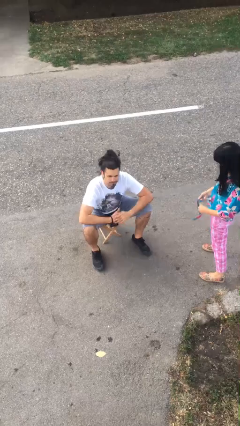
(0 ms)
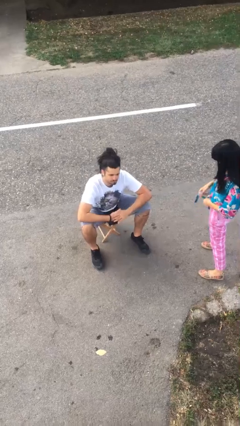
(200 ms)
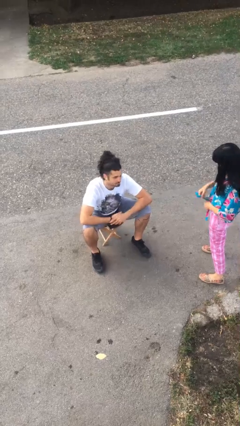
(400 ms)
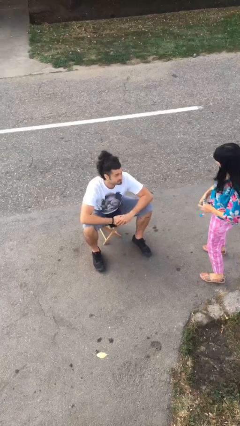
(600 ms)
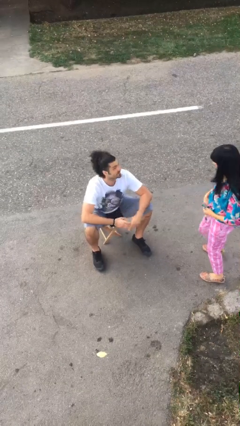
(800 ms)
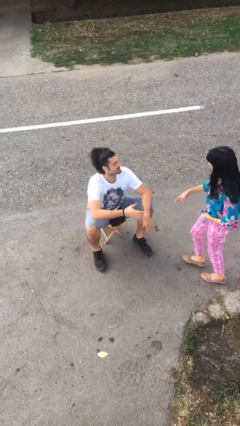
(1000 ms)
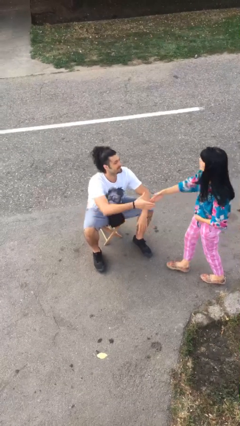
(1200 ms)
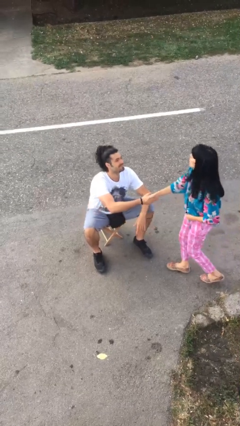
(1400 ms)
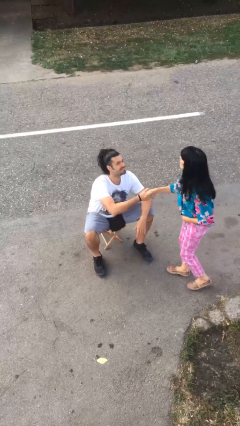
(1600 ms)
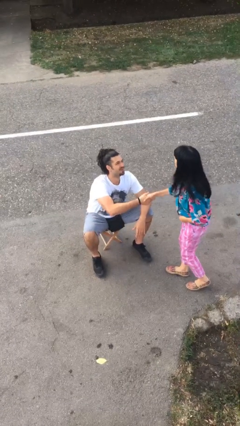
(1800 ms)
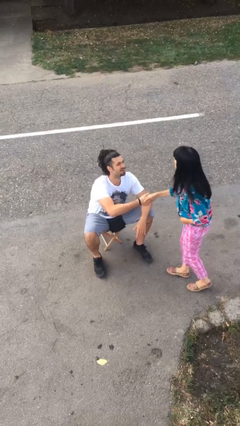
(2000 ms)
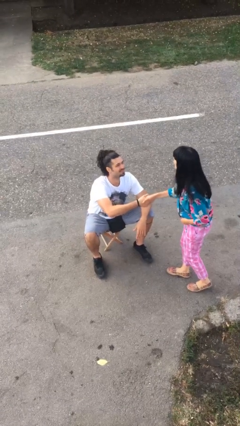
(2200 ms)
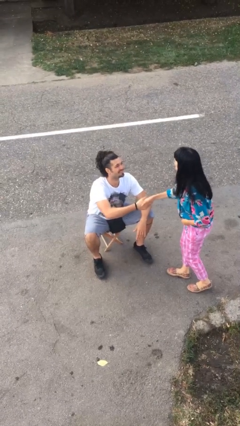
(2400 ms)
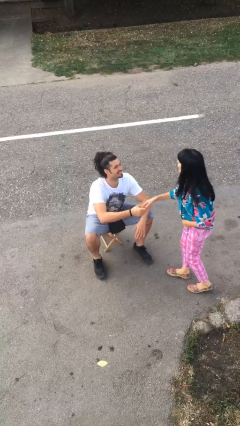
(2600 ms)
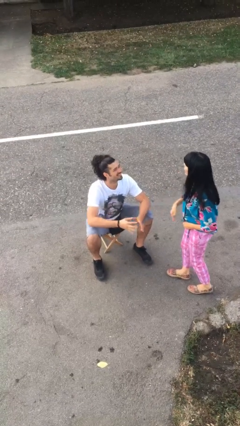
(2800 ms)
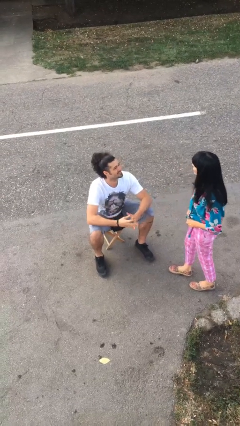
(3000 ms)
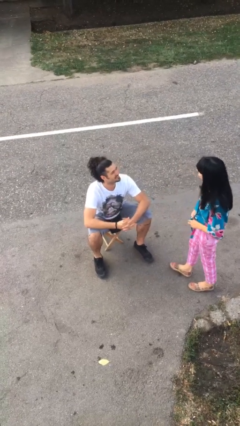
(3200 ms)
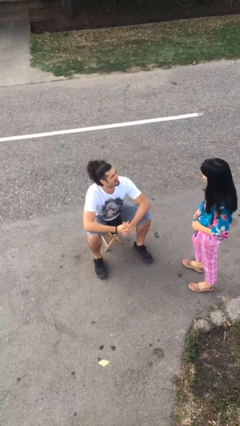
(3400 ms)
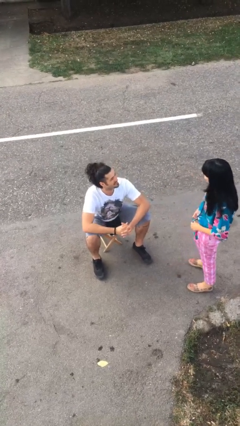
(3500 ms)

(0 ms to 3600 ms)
person shakes hand

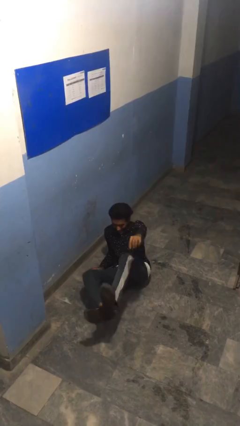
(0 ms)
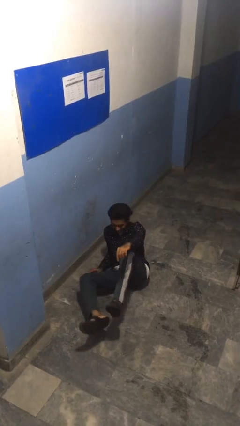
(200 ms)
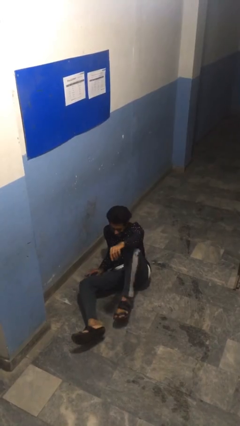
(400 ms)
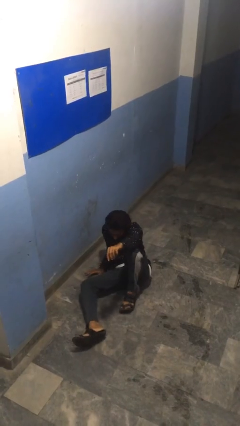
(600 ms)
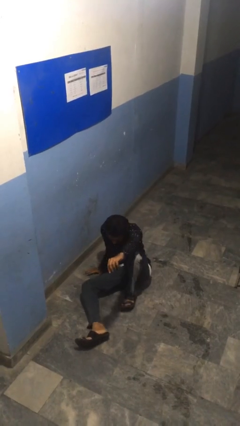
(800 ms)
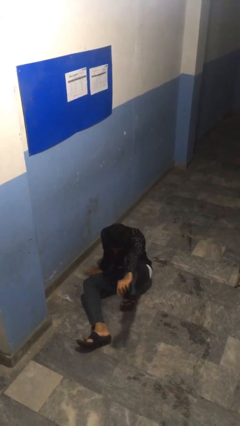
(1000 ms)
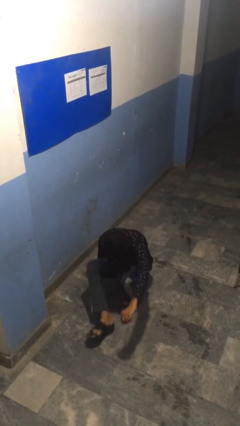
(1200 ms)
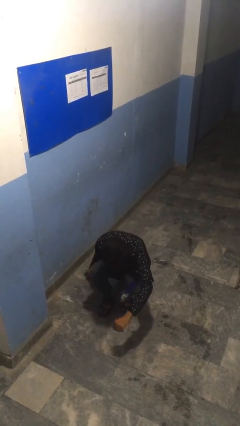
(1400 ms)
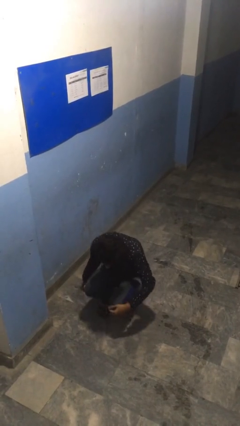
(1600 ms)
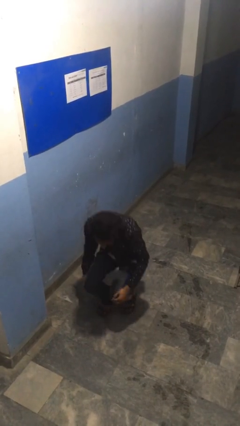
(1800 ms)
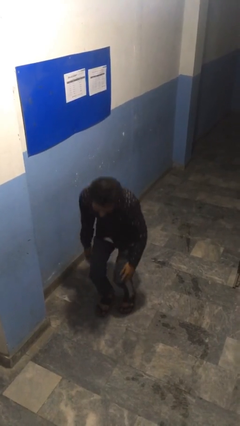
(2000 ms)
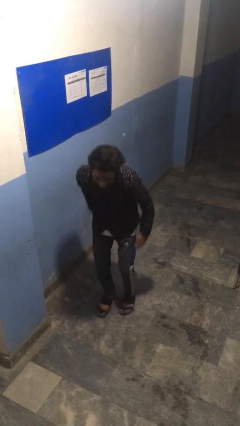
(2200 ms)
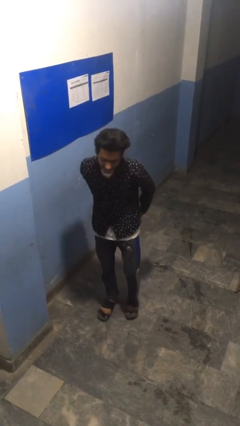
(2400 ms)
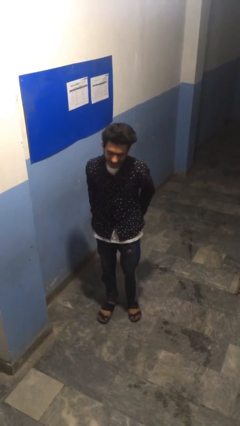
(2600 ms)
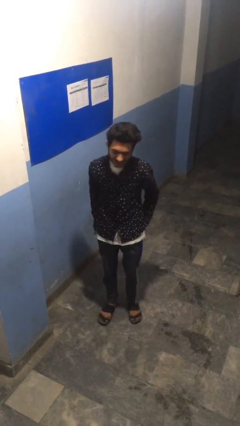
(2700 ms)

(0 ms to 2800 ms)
person stands up from floor

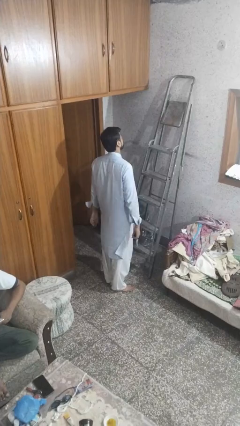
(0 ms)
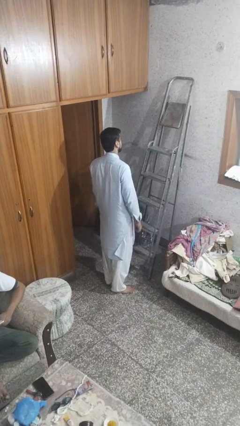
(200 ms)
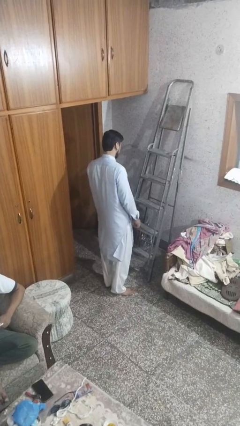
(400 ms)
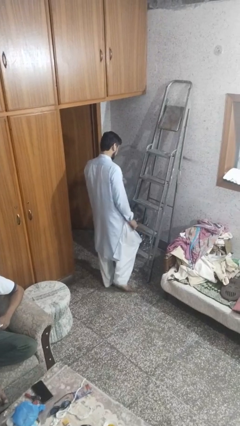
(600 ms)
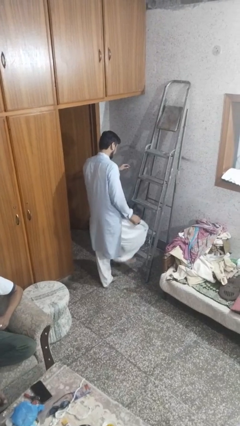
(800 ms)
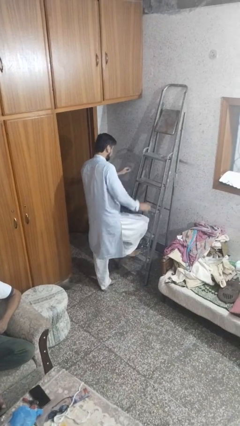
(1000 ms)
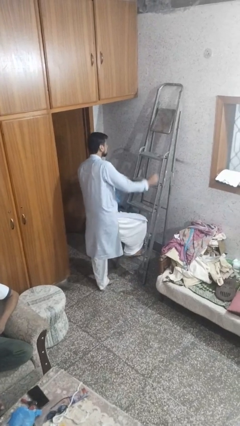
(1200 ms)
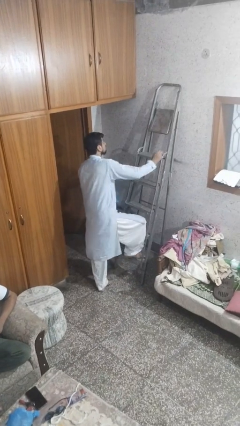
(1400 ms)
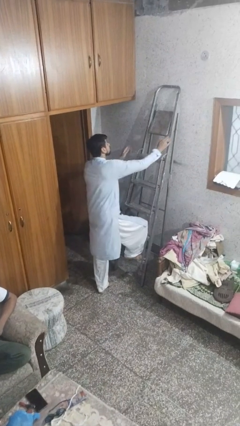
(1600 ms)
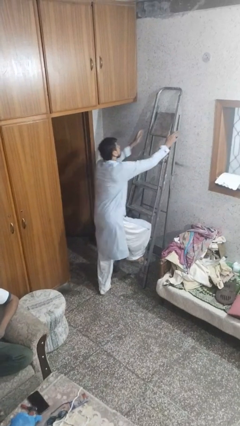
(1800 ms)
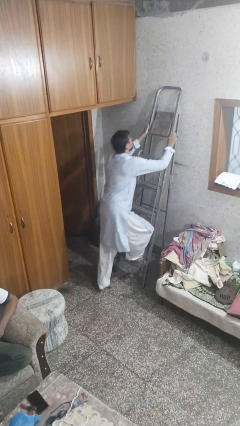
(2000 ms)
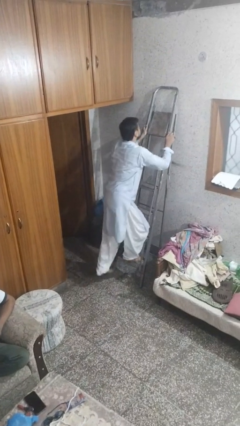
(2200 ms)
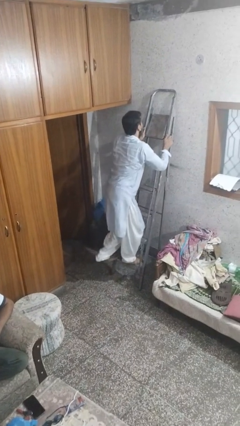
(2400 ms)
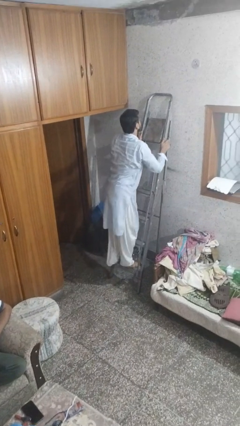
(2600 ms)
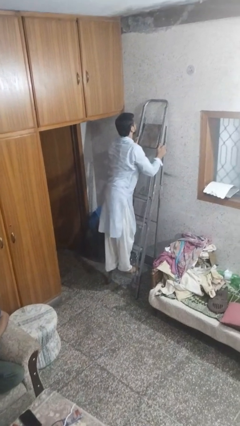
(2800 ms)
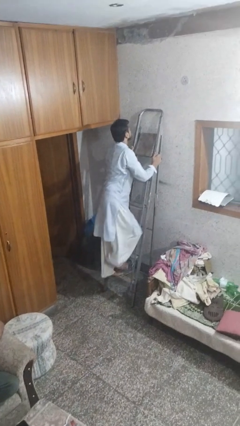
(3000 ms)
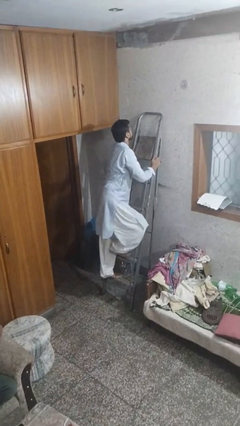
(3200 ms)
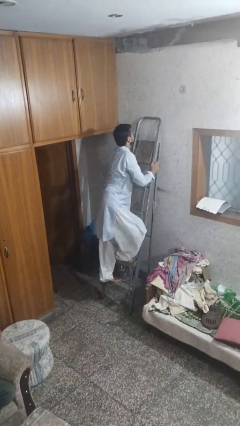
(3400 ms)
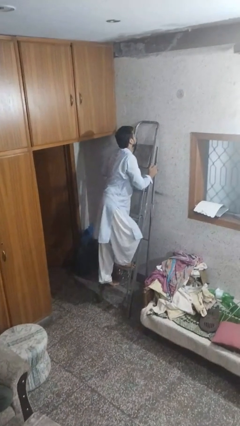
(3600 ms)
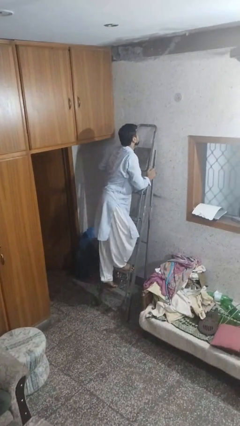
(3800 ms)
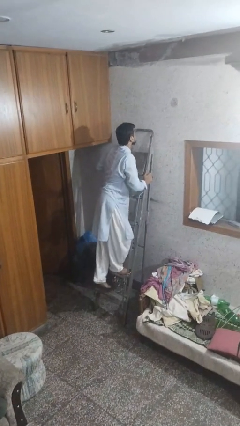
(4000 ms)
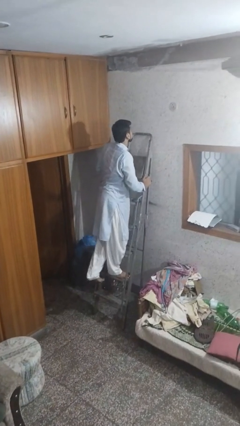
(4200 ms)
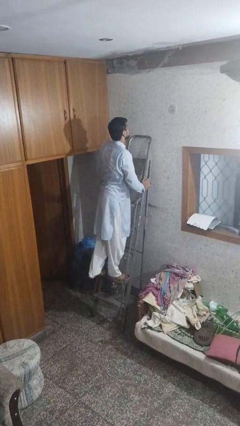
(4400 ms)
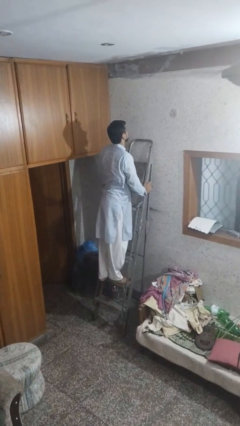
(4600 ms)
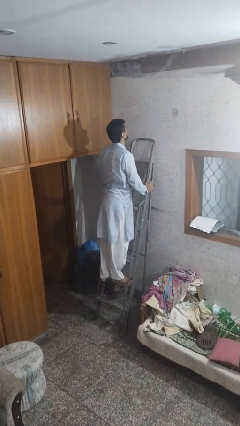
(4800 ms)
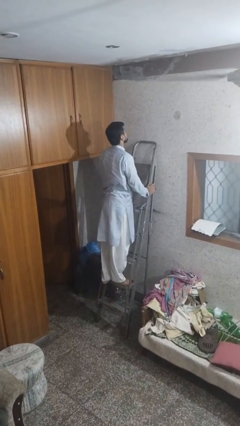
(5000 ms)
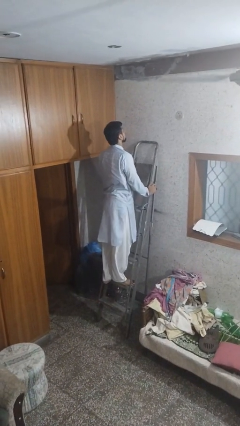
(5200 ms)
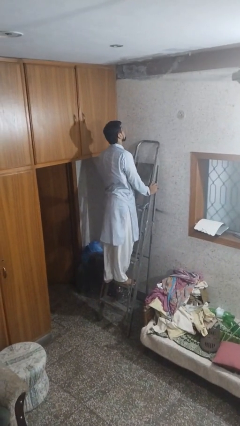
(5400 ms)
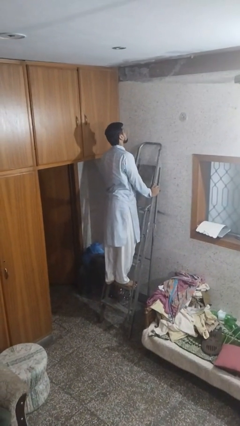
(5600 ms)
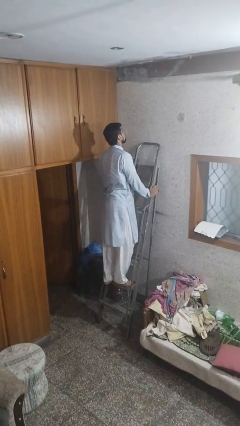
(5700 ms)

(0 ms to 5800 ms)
person climbs up ladder

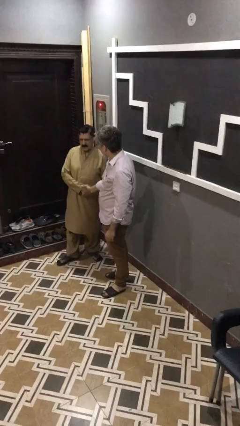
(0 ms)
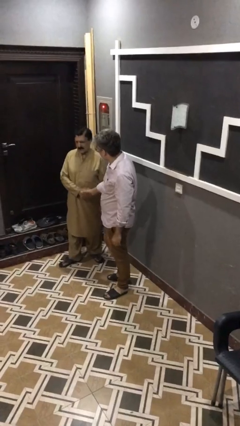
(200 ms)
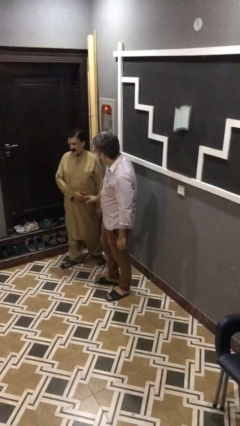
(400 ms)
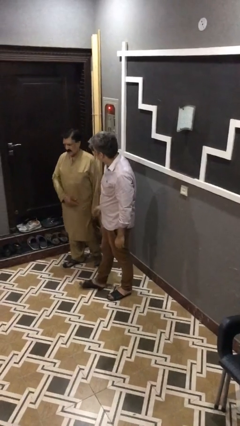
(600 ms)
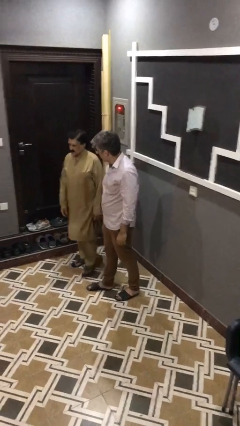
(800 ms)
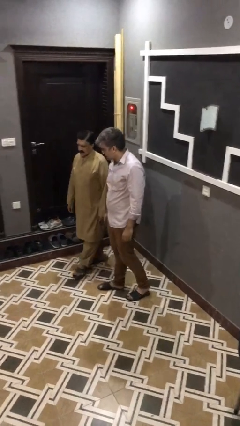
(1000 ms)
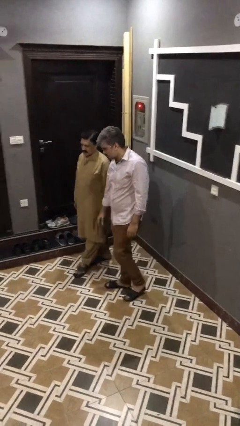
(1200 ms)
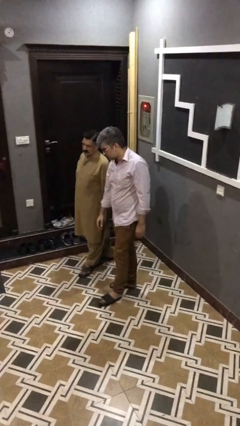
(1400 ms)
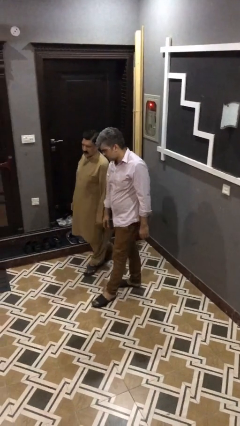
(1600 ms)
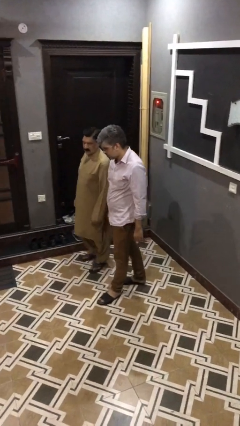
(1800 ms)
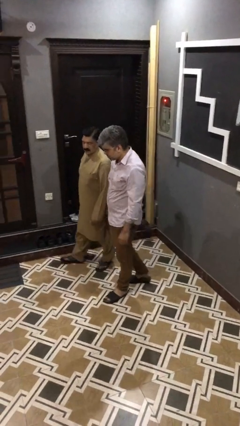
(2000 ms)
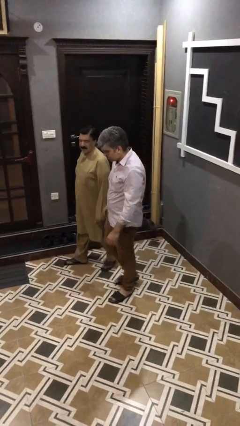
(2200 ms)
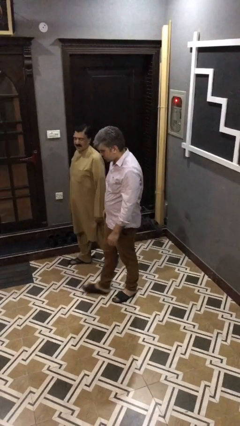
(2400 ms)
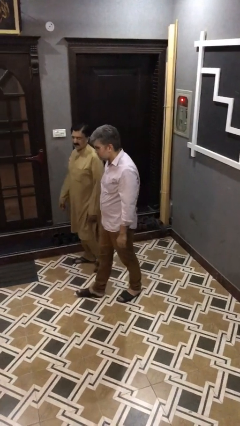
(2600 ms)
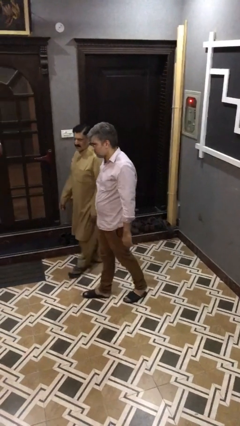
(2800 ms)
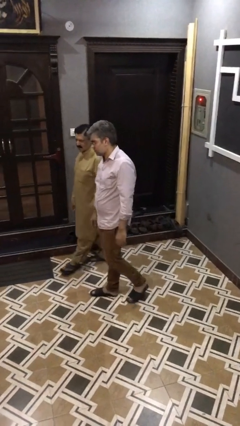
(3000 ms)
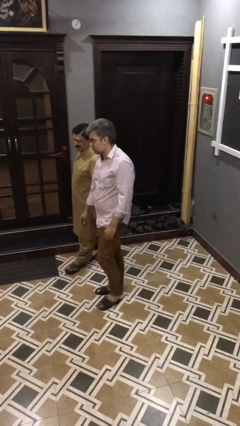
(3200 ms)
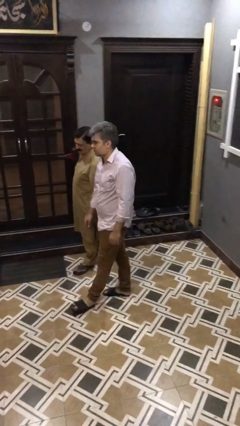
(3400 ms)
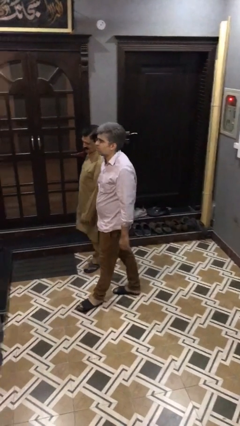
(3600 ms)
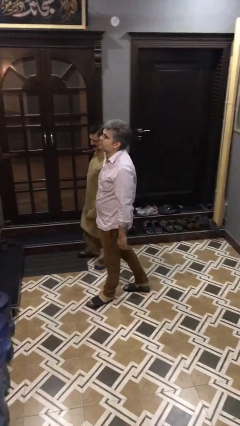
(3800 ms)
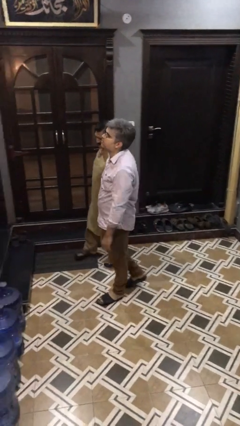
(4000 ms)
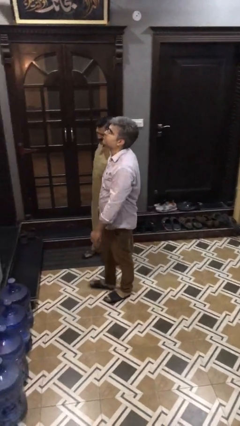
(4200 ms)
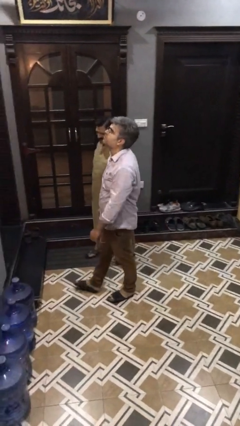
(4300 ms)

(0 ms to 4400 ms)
person talks to person

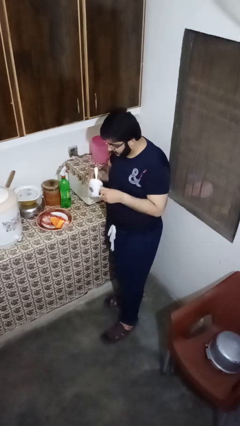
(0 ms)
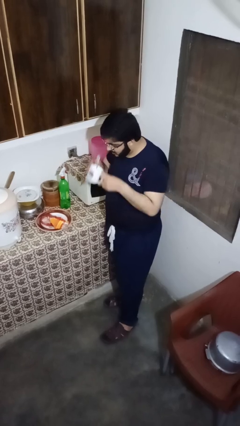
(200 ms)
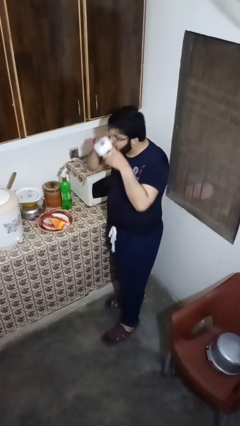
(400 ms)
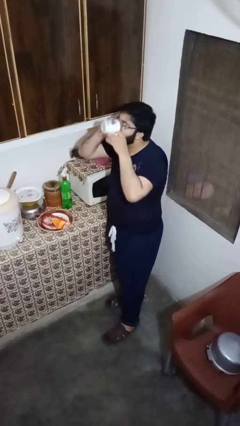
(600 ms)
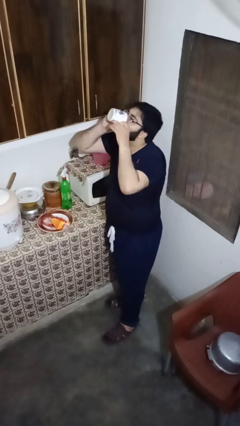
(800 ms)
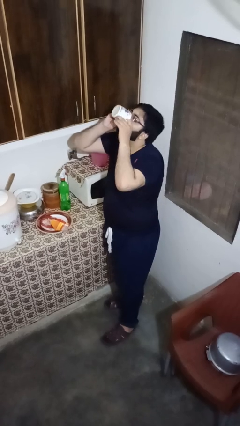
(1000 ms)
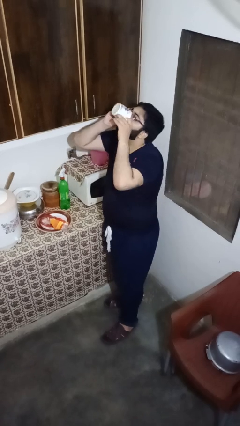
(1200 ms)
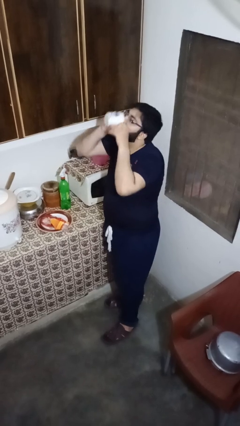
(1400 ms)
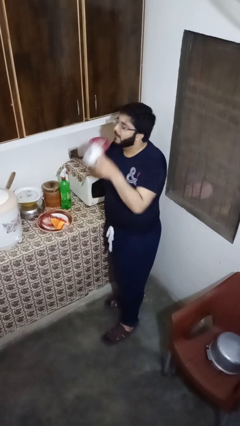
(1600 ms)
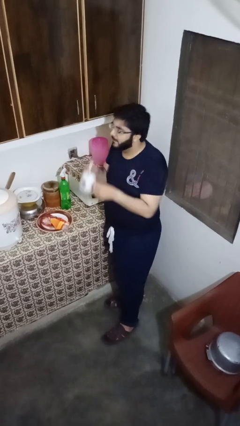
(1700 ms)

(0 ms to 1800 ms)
person drinks from mug
